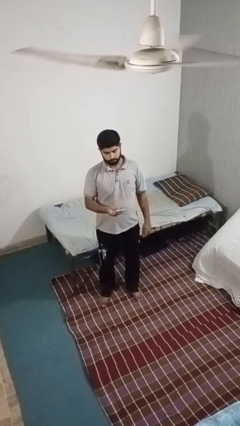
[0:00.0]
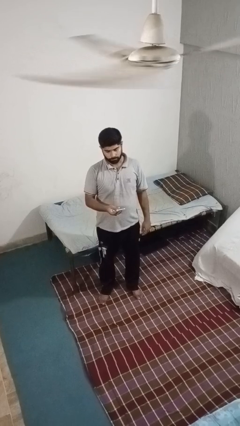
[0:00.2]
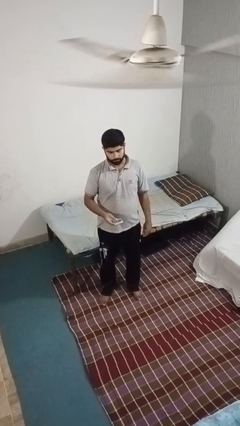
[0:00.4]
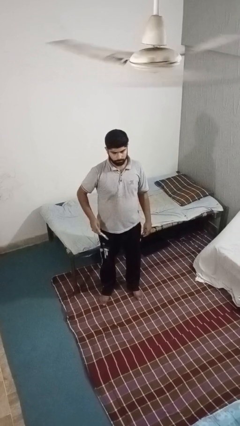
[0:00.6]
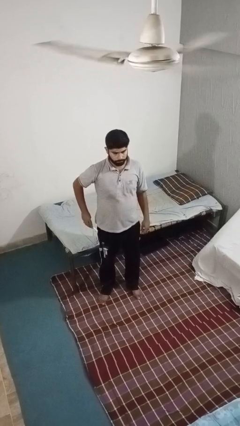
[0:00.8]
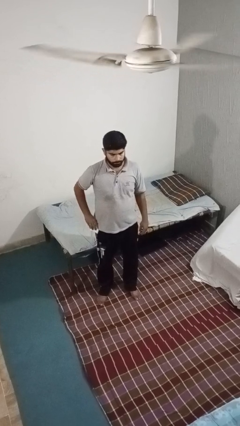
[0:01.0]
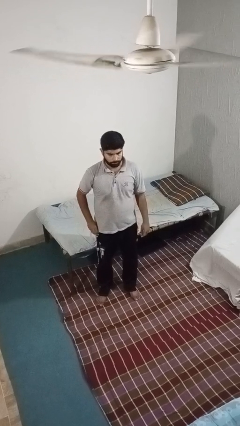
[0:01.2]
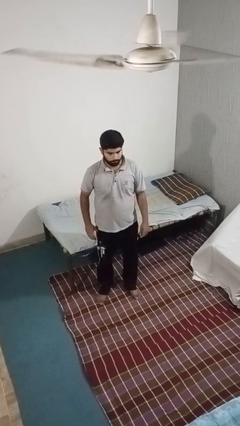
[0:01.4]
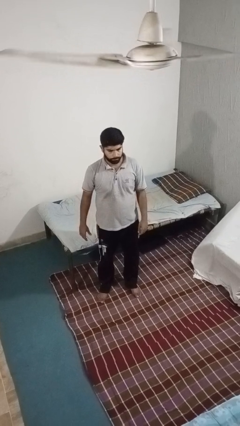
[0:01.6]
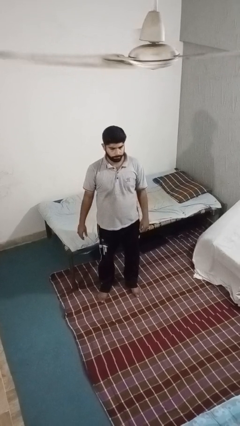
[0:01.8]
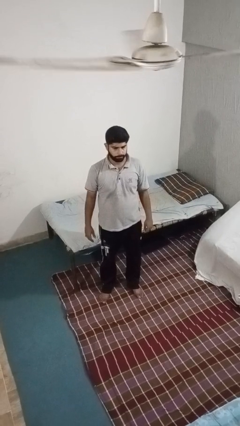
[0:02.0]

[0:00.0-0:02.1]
person puts phone into pocket

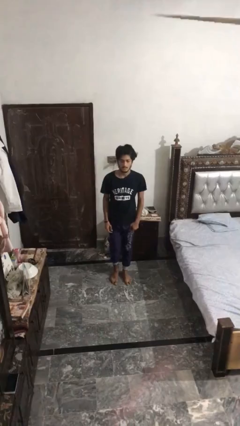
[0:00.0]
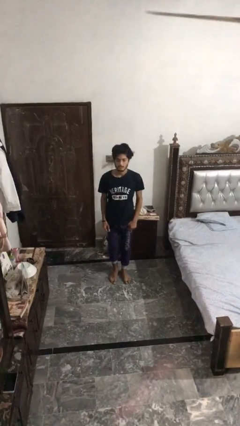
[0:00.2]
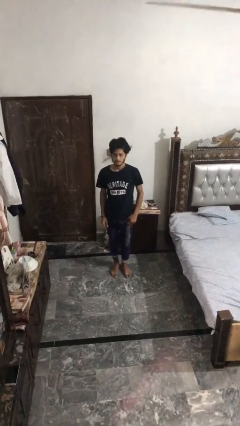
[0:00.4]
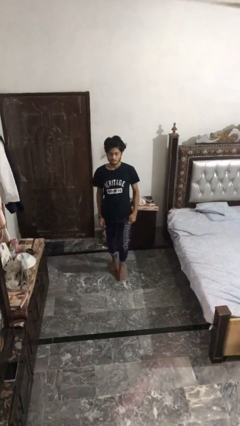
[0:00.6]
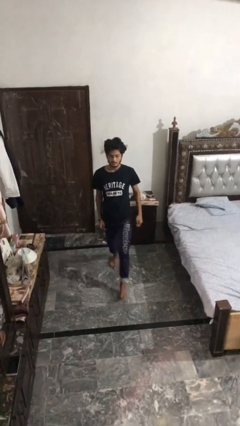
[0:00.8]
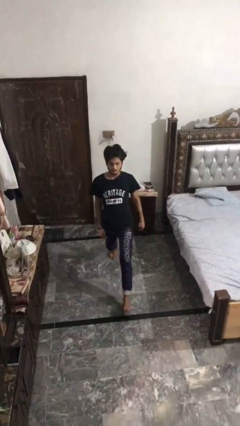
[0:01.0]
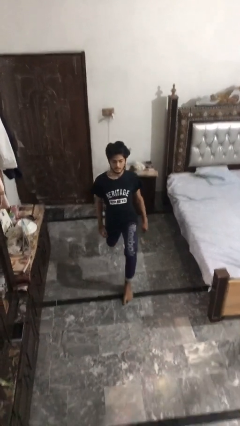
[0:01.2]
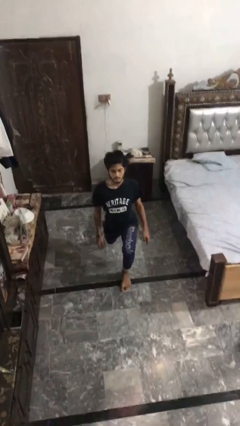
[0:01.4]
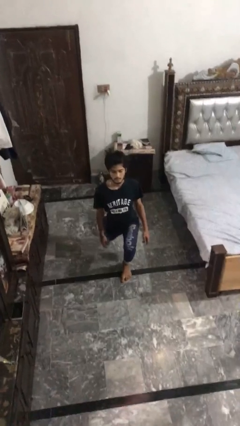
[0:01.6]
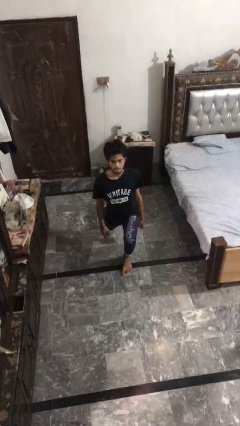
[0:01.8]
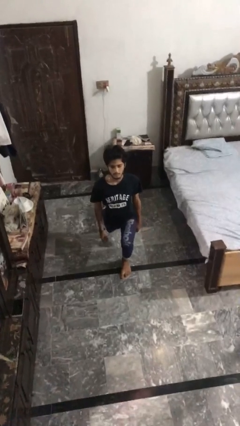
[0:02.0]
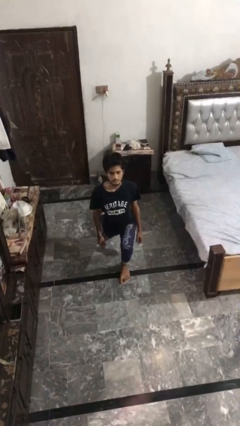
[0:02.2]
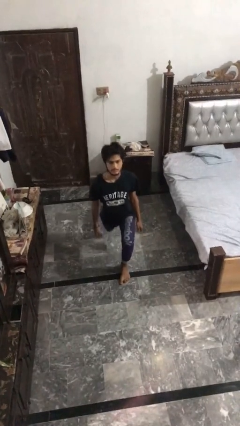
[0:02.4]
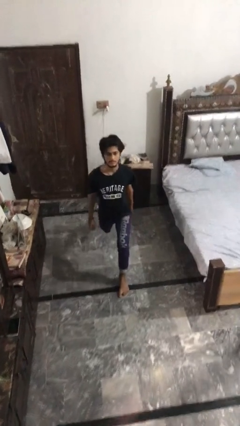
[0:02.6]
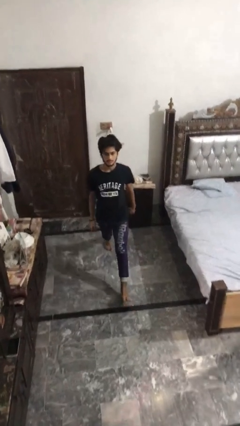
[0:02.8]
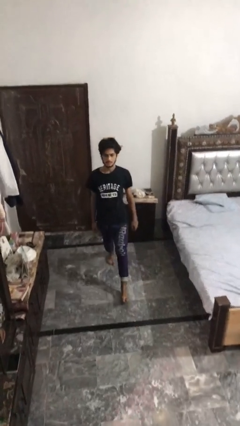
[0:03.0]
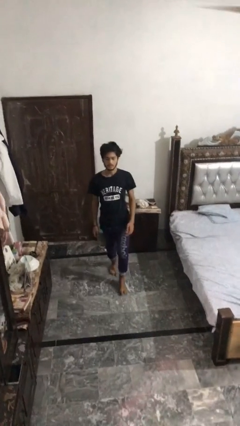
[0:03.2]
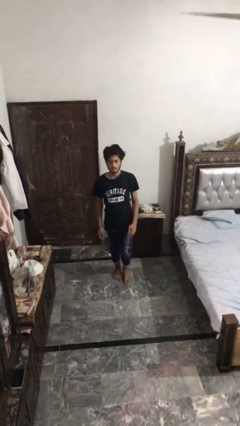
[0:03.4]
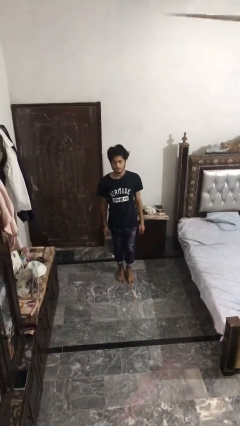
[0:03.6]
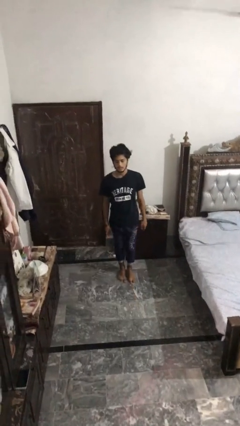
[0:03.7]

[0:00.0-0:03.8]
person exercises with lunges

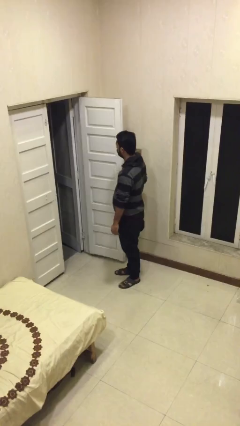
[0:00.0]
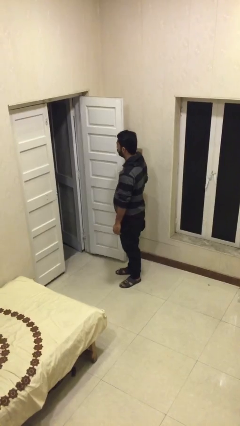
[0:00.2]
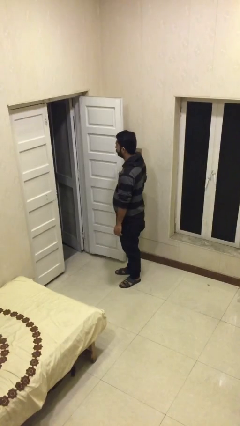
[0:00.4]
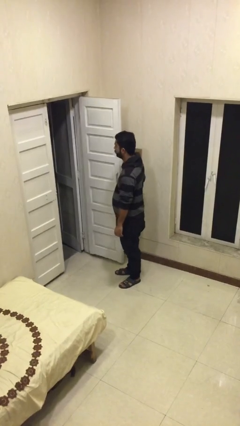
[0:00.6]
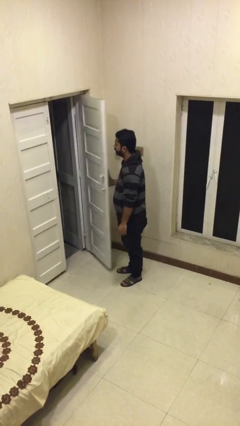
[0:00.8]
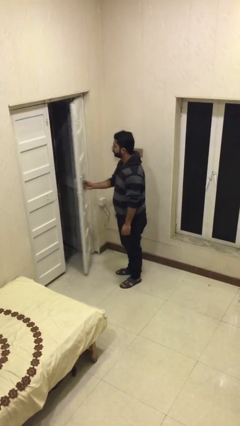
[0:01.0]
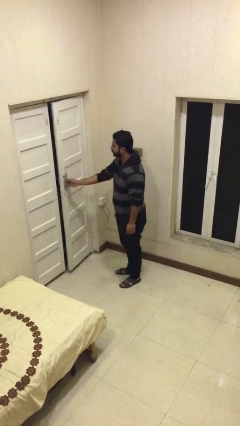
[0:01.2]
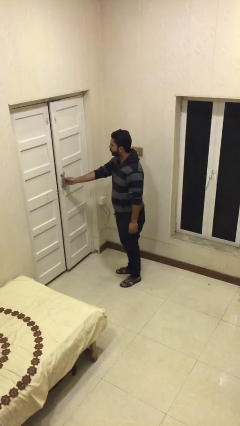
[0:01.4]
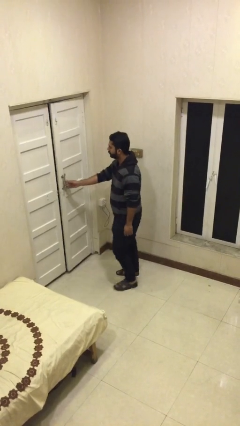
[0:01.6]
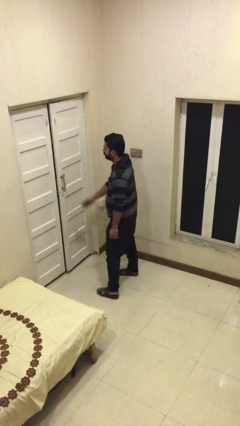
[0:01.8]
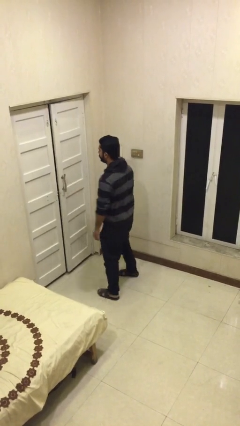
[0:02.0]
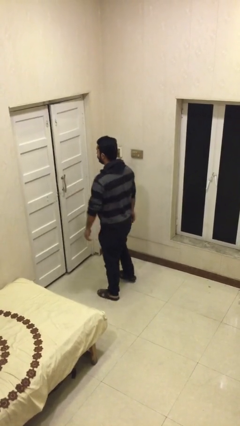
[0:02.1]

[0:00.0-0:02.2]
person closes facility door

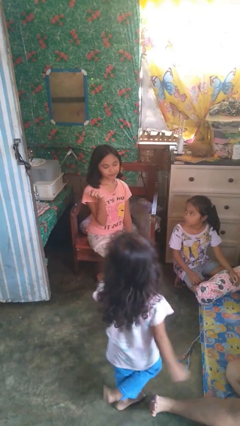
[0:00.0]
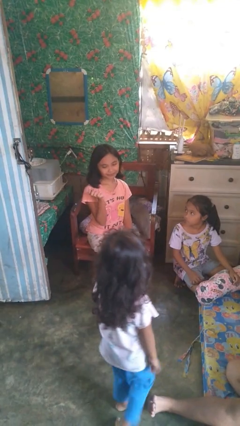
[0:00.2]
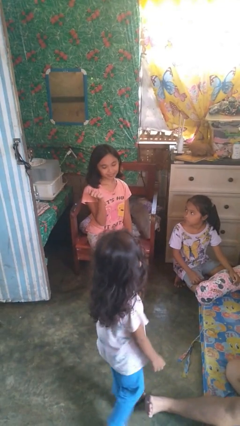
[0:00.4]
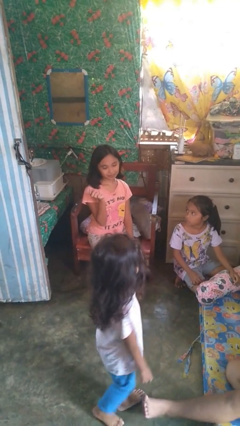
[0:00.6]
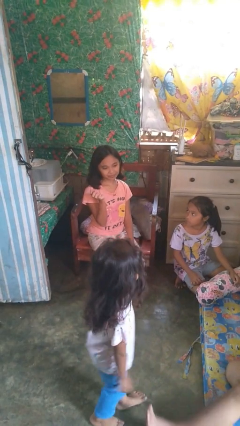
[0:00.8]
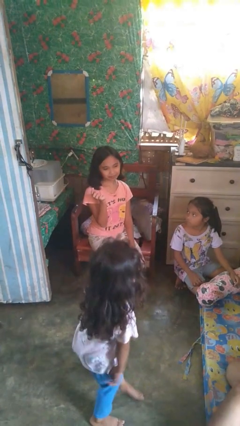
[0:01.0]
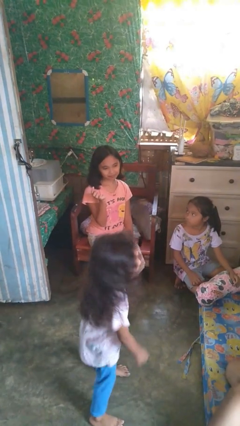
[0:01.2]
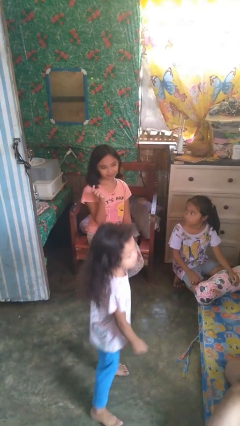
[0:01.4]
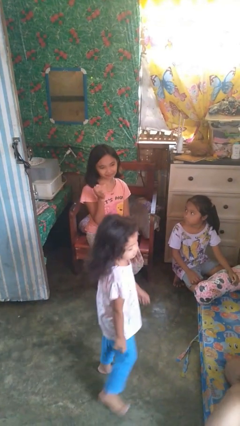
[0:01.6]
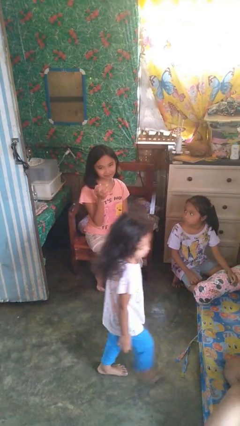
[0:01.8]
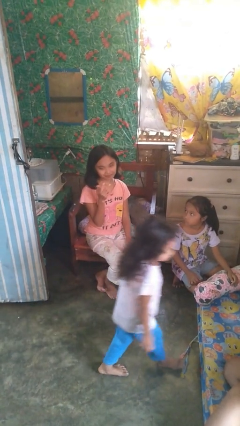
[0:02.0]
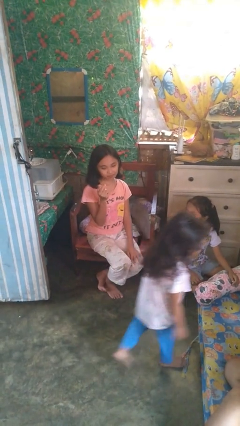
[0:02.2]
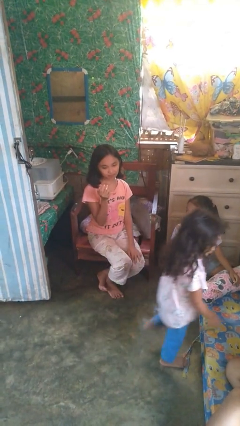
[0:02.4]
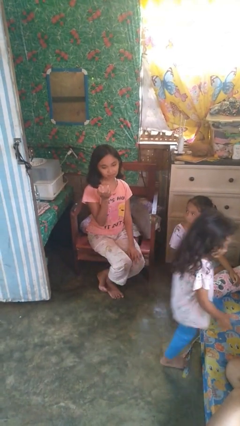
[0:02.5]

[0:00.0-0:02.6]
person licks fingers

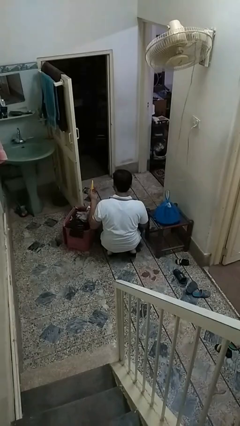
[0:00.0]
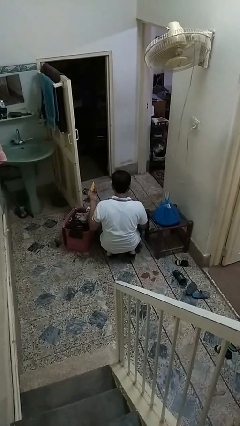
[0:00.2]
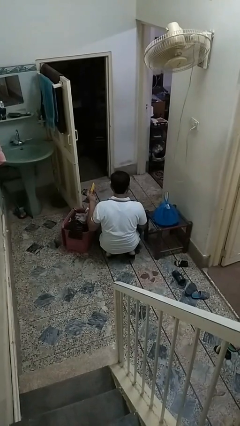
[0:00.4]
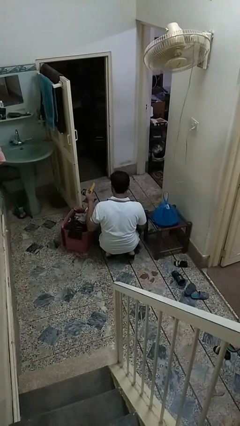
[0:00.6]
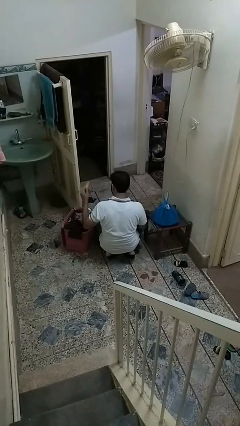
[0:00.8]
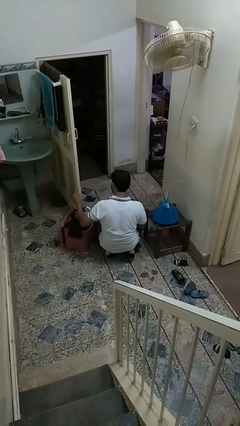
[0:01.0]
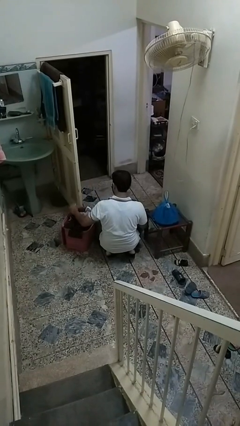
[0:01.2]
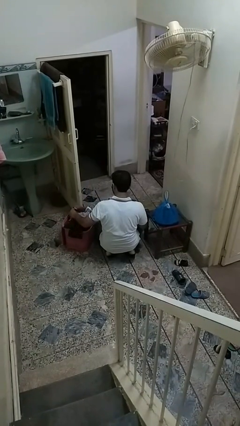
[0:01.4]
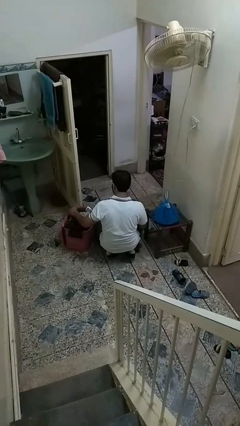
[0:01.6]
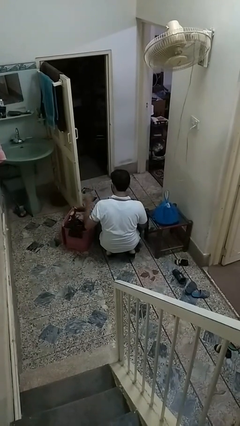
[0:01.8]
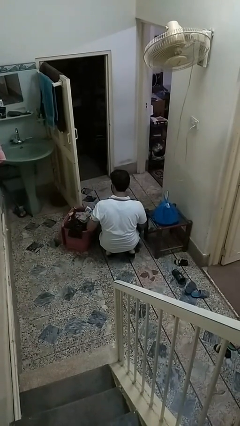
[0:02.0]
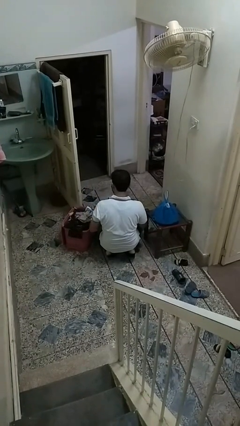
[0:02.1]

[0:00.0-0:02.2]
person puts object into basket

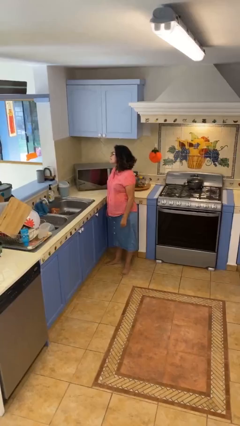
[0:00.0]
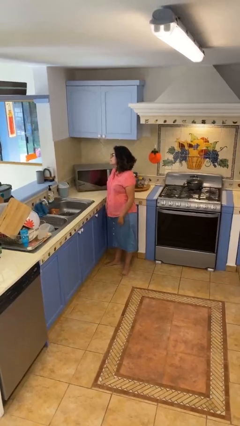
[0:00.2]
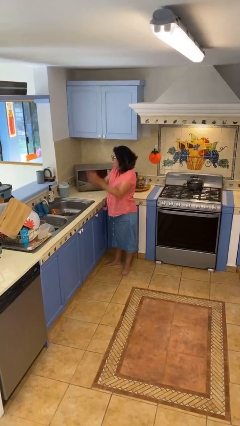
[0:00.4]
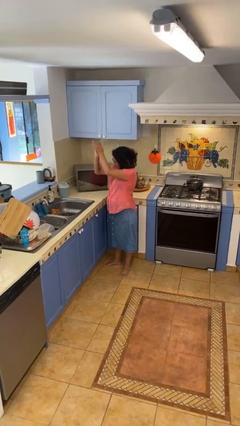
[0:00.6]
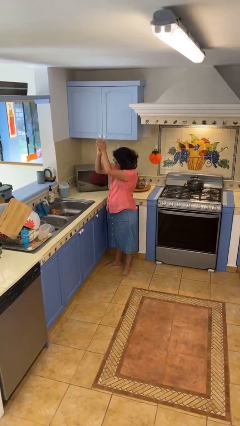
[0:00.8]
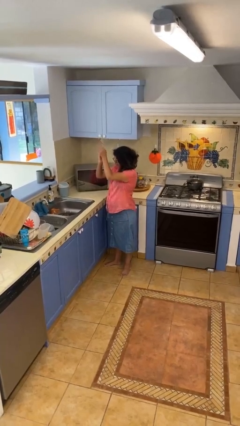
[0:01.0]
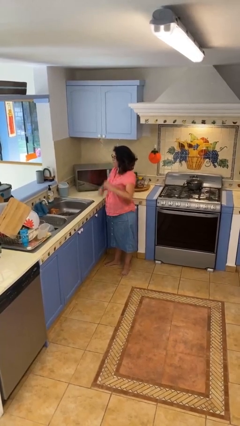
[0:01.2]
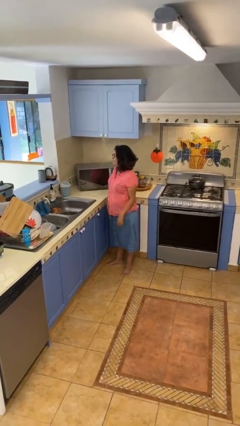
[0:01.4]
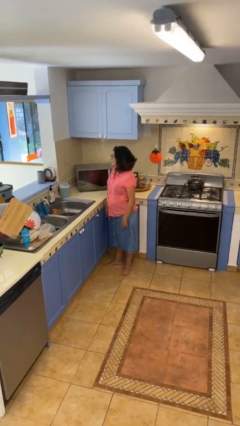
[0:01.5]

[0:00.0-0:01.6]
person claps hands

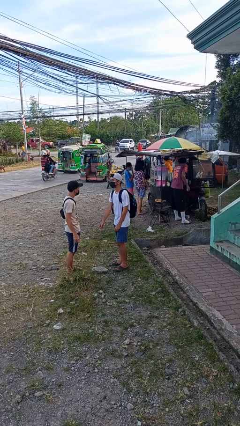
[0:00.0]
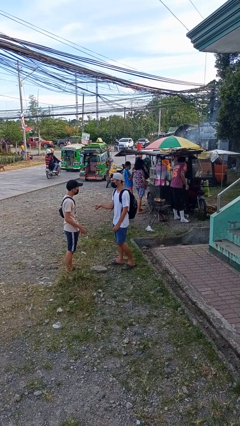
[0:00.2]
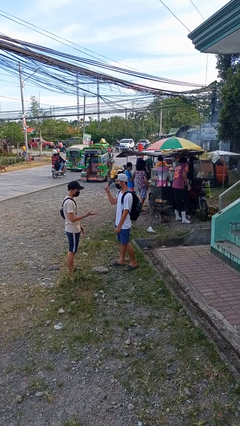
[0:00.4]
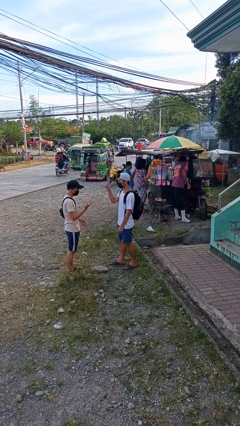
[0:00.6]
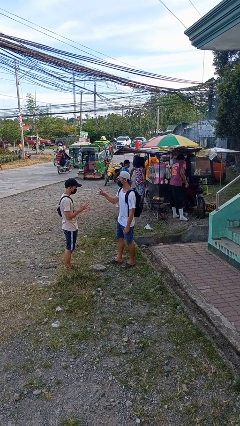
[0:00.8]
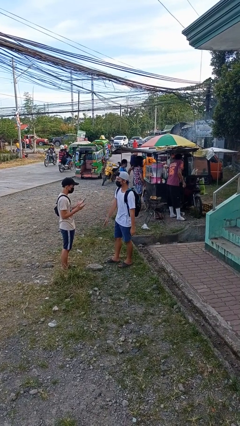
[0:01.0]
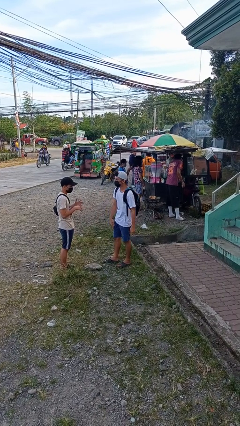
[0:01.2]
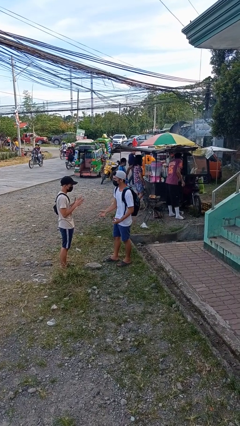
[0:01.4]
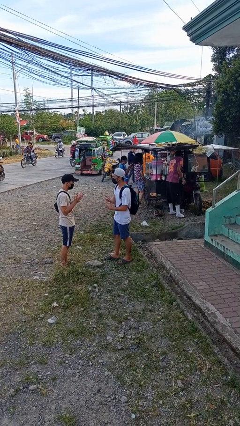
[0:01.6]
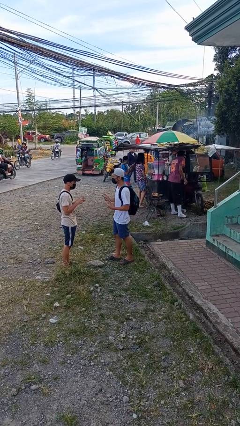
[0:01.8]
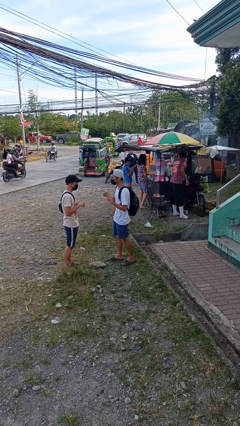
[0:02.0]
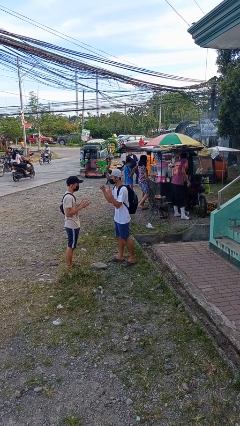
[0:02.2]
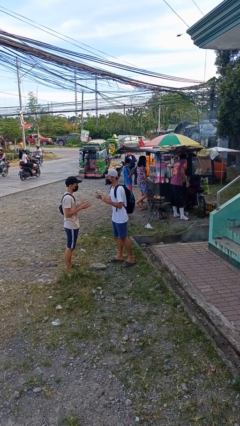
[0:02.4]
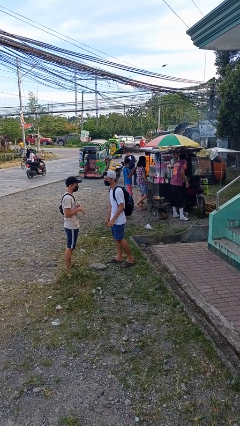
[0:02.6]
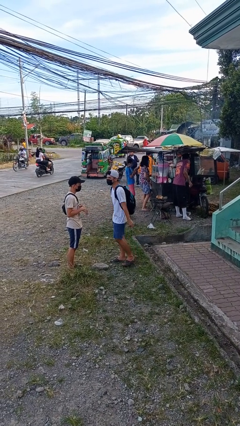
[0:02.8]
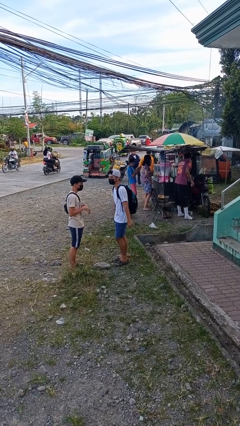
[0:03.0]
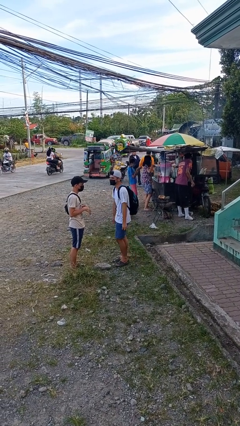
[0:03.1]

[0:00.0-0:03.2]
person talks to person
